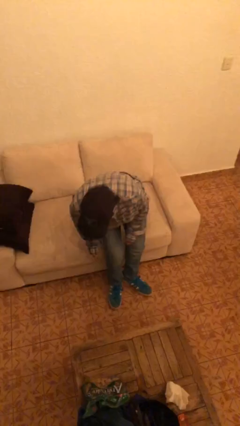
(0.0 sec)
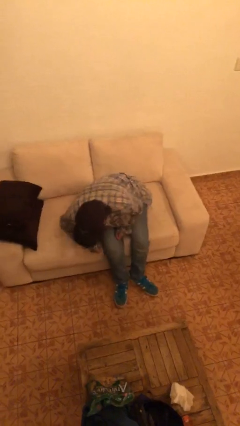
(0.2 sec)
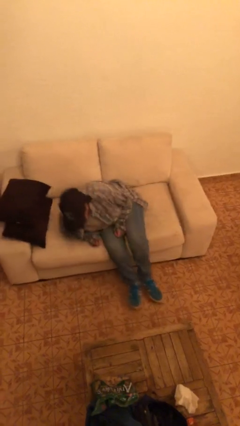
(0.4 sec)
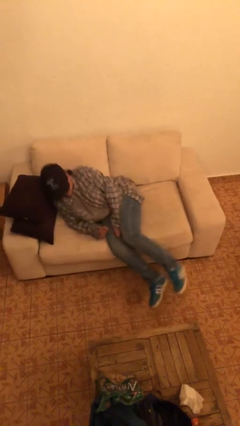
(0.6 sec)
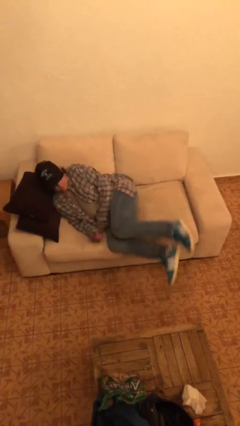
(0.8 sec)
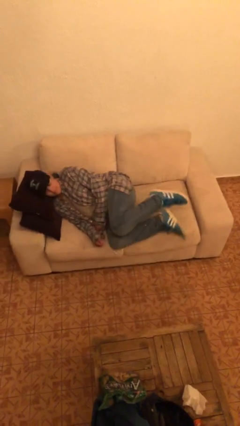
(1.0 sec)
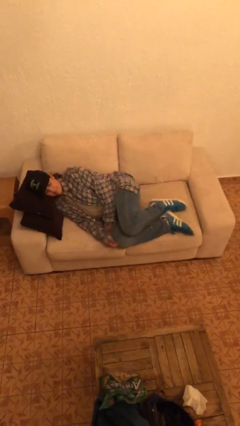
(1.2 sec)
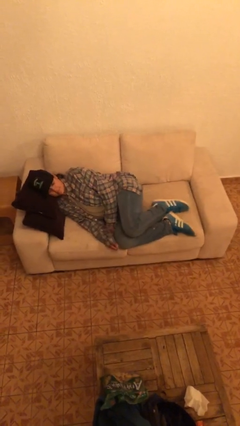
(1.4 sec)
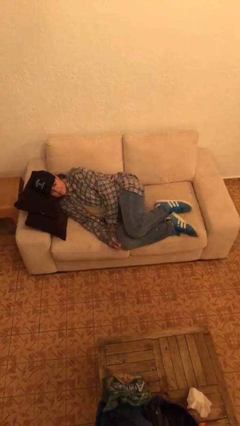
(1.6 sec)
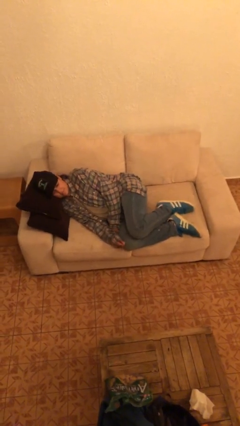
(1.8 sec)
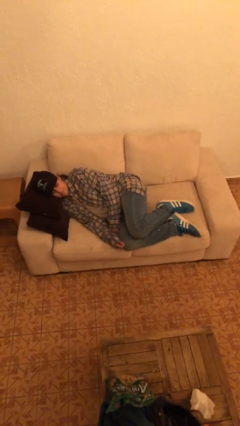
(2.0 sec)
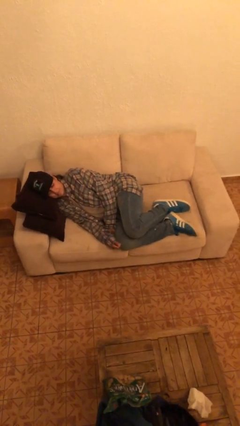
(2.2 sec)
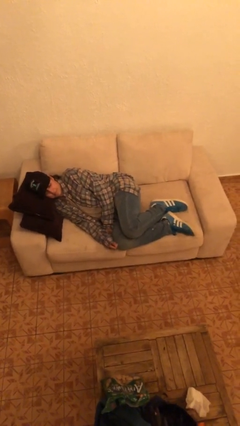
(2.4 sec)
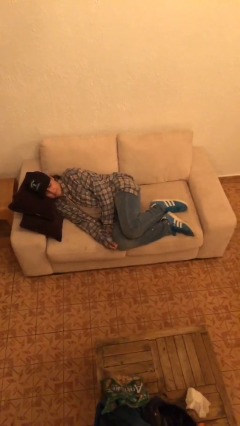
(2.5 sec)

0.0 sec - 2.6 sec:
person lies down on couch

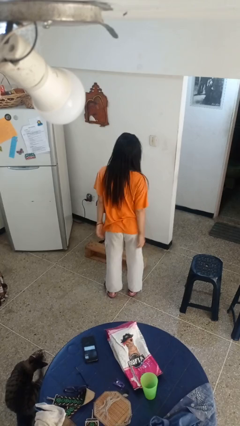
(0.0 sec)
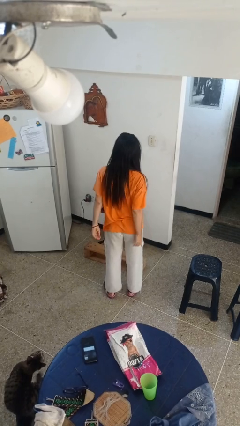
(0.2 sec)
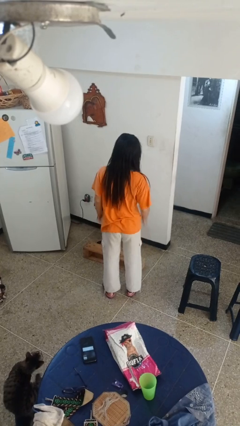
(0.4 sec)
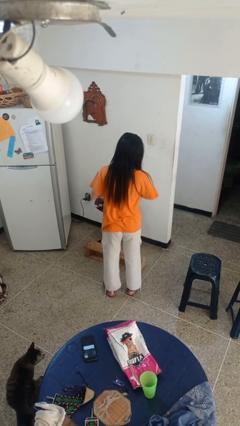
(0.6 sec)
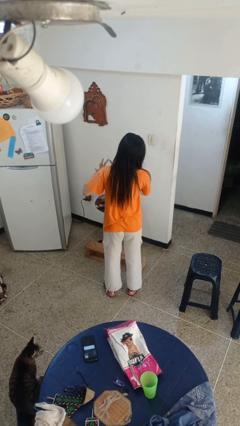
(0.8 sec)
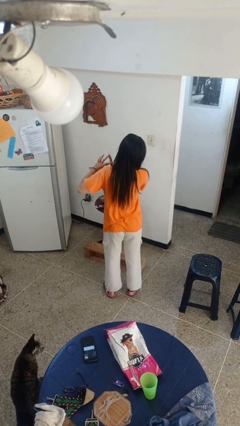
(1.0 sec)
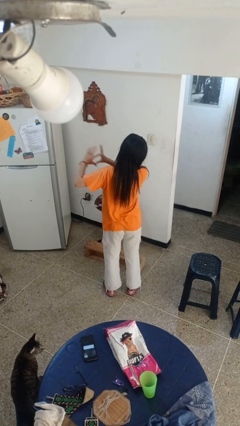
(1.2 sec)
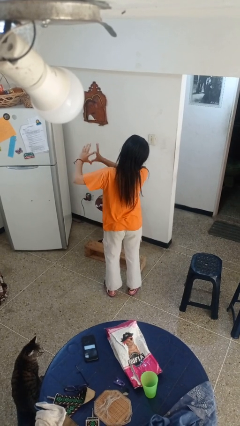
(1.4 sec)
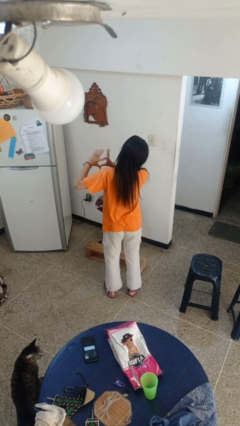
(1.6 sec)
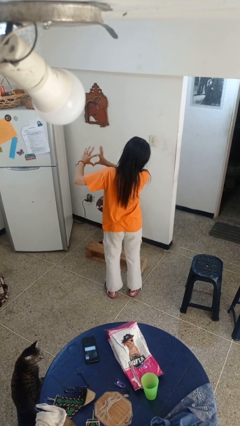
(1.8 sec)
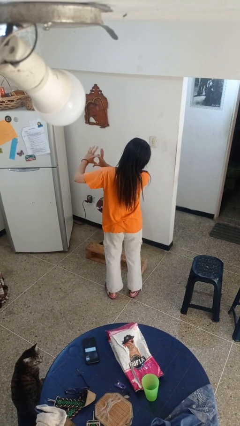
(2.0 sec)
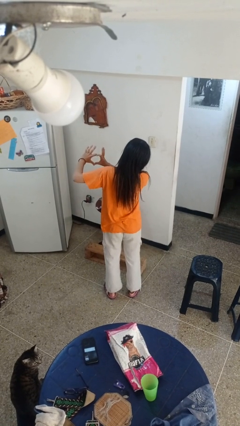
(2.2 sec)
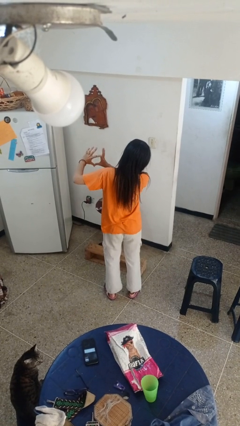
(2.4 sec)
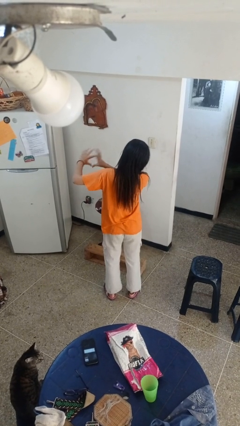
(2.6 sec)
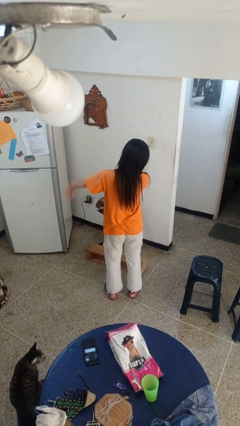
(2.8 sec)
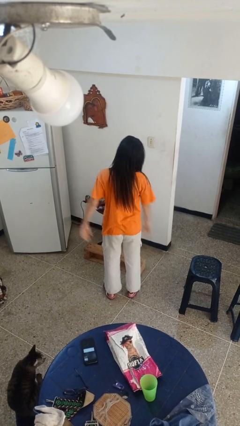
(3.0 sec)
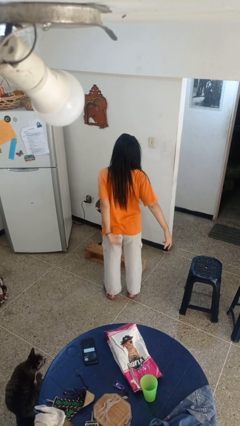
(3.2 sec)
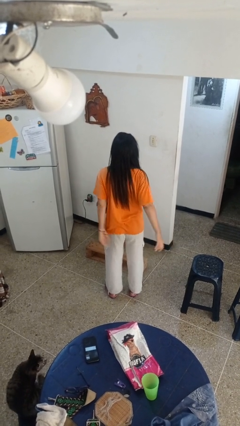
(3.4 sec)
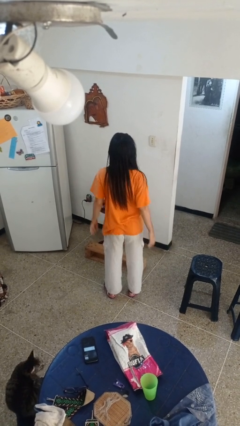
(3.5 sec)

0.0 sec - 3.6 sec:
person gestures heart

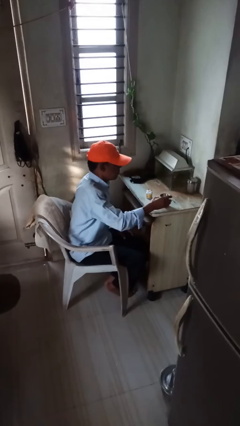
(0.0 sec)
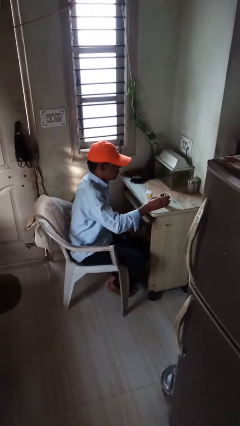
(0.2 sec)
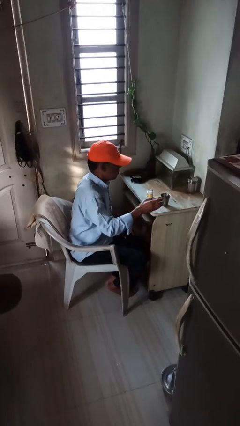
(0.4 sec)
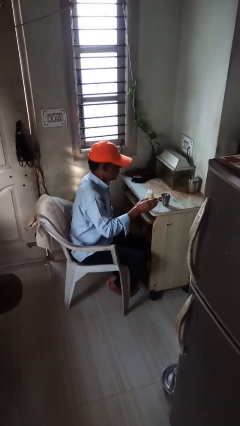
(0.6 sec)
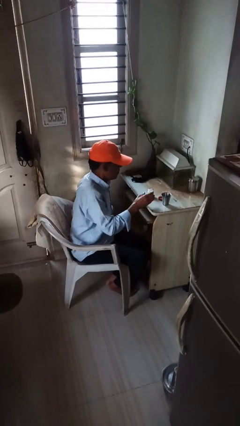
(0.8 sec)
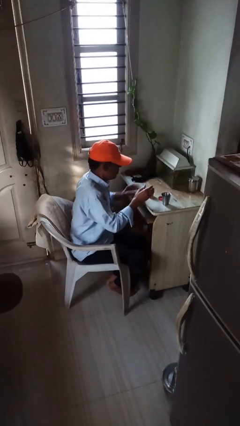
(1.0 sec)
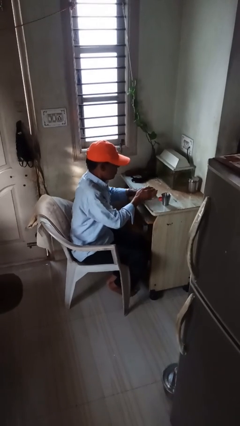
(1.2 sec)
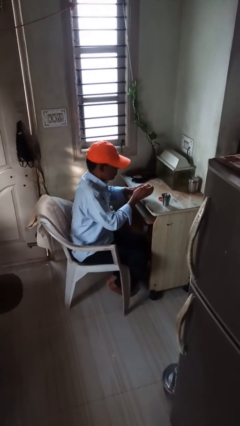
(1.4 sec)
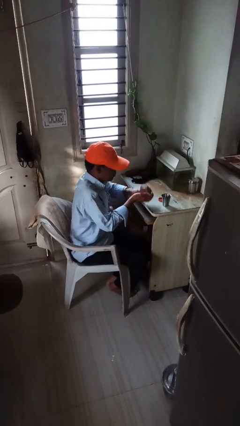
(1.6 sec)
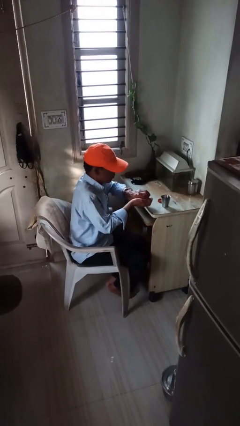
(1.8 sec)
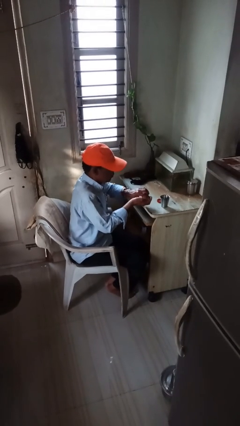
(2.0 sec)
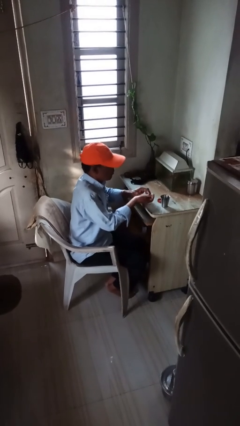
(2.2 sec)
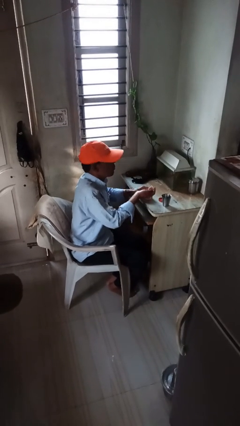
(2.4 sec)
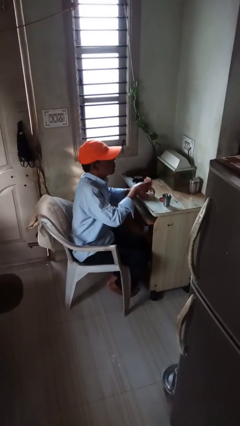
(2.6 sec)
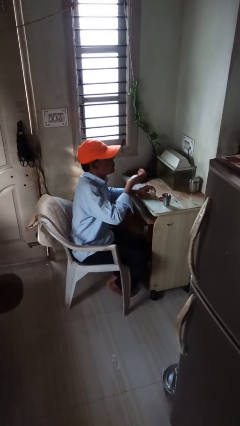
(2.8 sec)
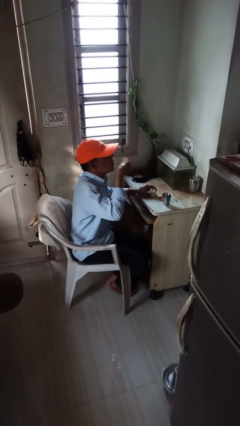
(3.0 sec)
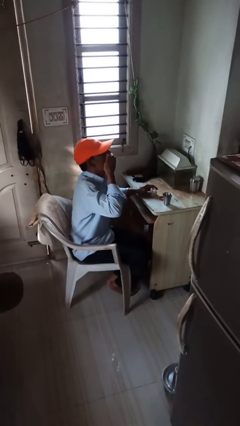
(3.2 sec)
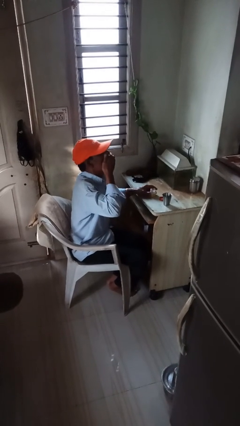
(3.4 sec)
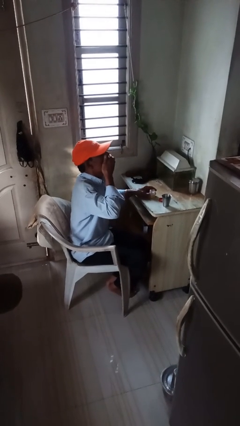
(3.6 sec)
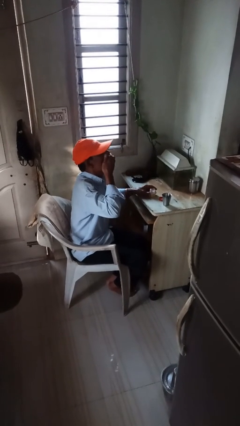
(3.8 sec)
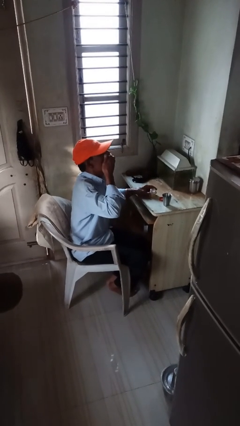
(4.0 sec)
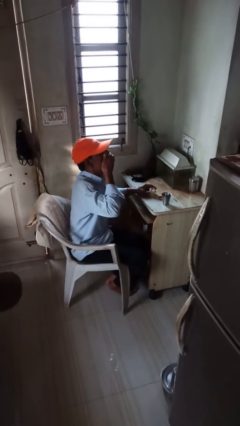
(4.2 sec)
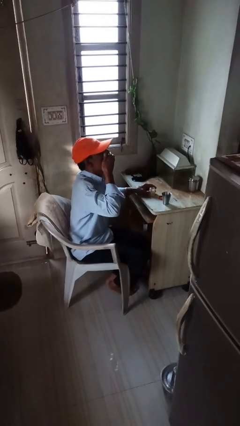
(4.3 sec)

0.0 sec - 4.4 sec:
person takes medicine pills

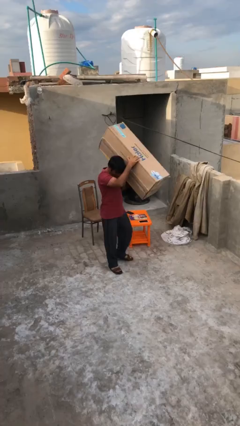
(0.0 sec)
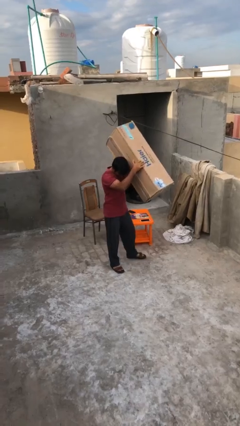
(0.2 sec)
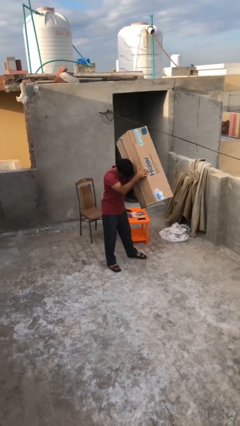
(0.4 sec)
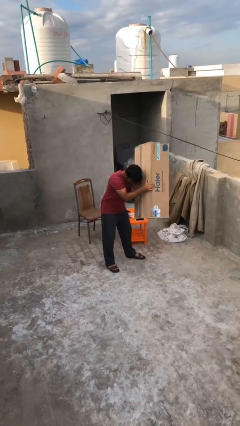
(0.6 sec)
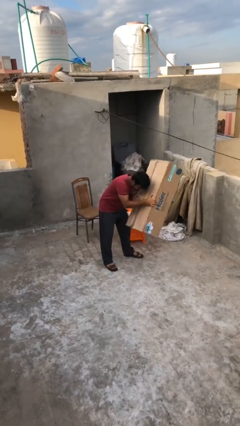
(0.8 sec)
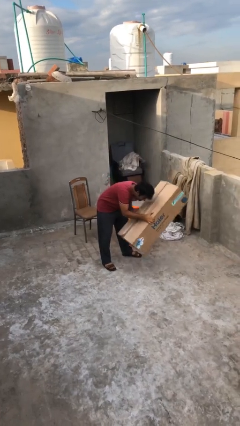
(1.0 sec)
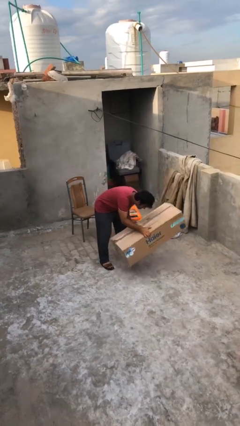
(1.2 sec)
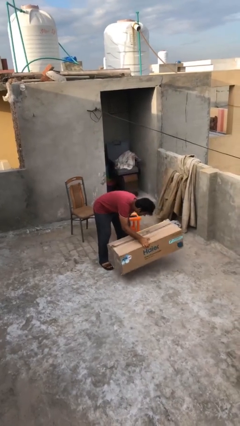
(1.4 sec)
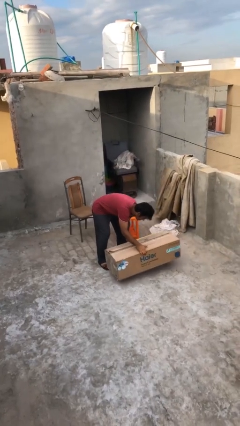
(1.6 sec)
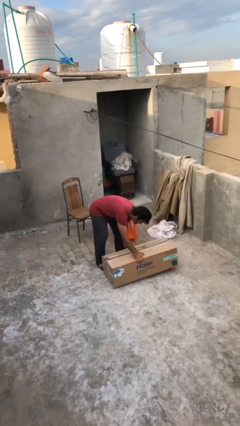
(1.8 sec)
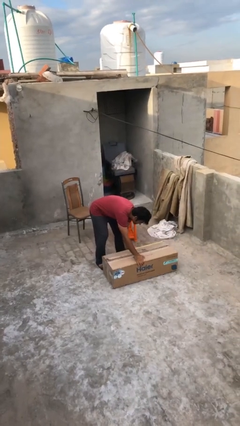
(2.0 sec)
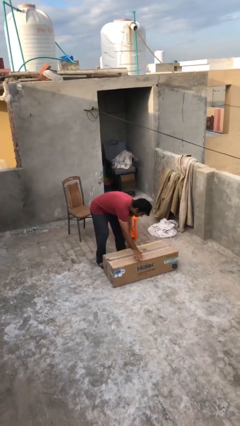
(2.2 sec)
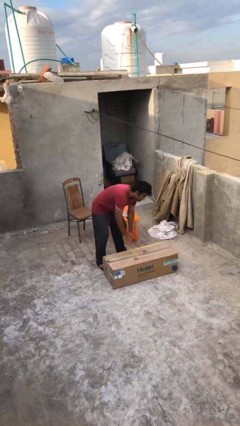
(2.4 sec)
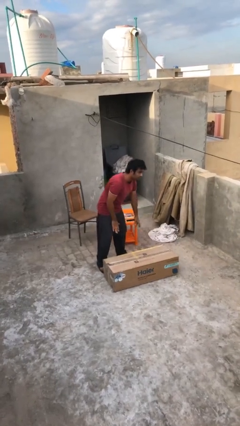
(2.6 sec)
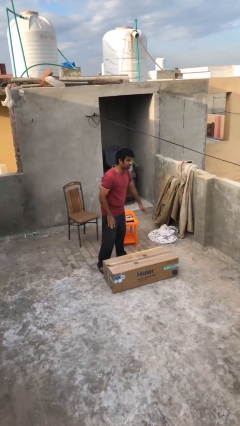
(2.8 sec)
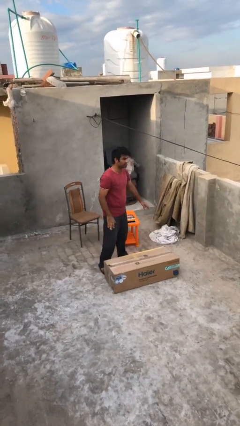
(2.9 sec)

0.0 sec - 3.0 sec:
person puts down object on floor

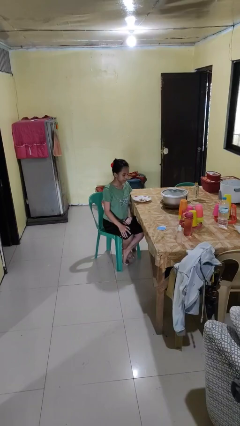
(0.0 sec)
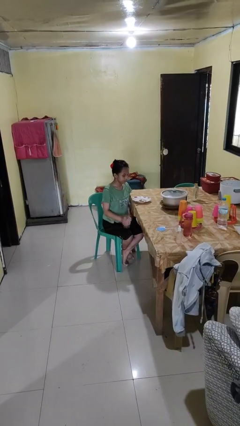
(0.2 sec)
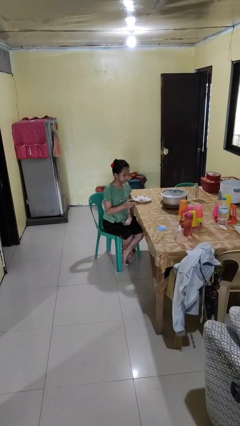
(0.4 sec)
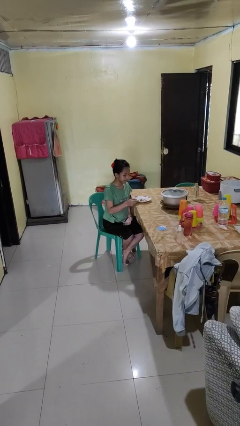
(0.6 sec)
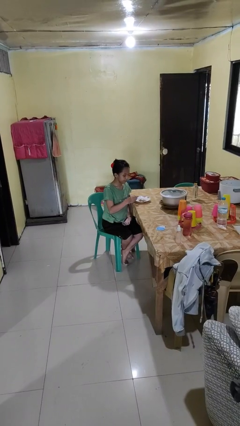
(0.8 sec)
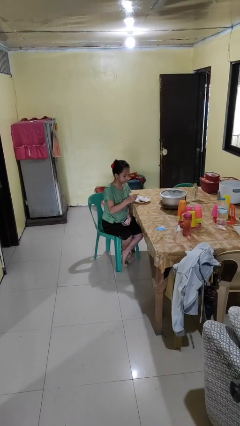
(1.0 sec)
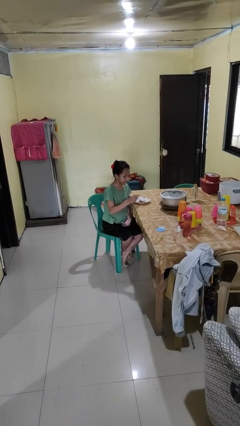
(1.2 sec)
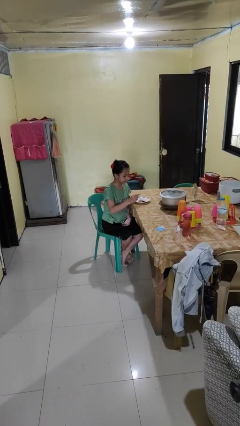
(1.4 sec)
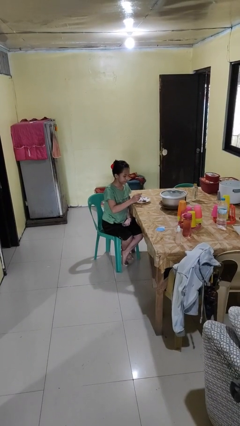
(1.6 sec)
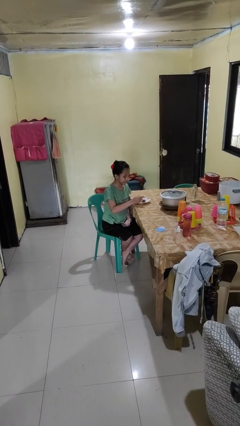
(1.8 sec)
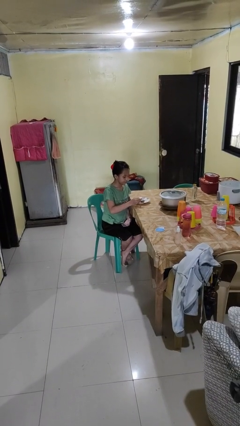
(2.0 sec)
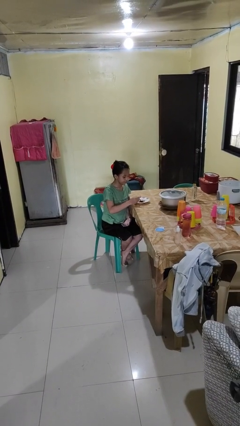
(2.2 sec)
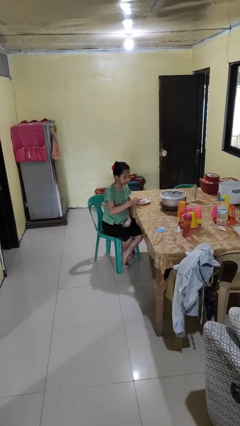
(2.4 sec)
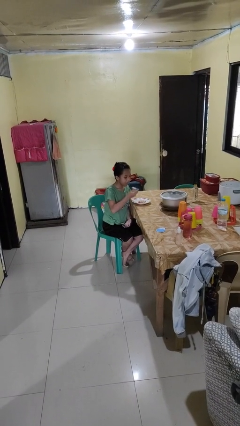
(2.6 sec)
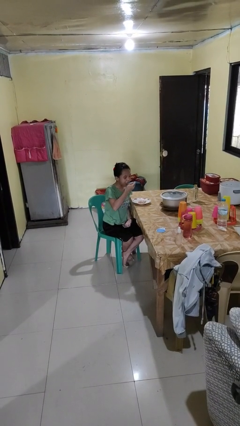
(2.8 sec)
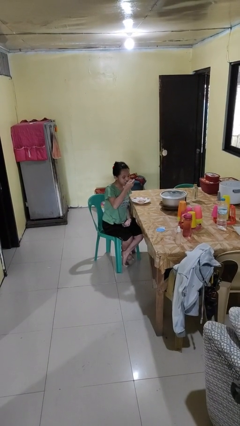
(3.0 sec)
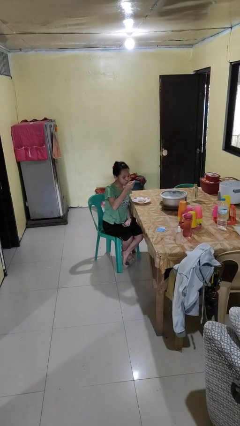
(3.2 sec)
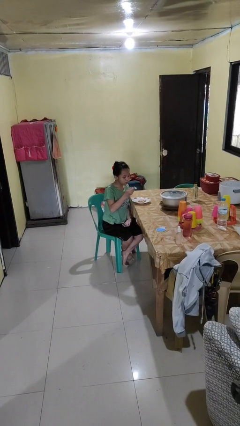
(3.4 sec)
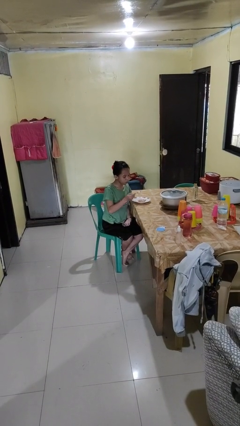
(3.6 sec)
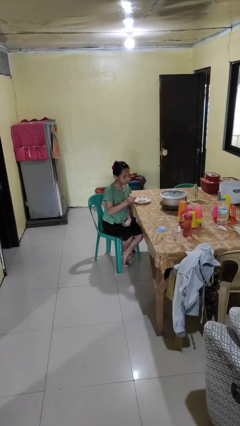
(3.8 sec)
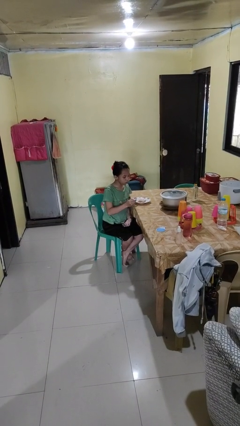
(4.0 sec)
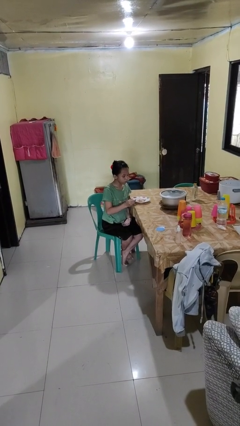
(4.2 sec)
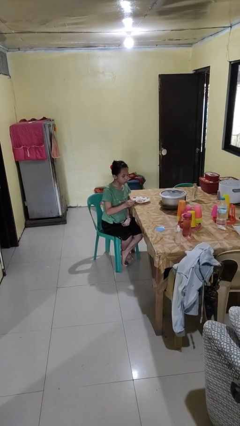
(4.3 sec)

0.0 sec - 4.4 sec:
person eats with utensil
